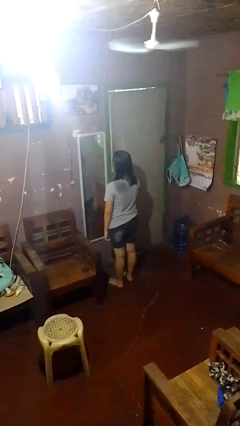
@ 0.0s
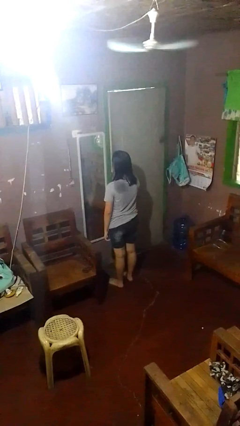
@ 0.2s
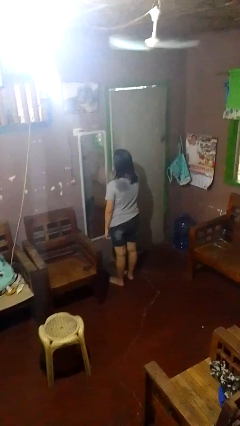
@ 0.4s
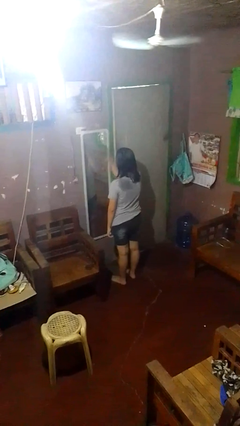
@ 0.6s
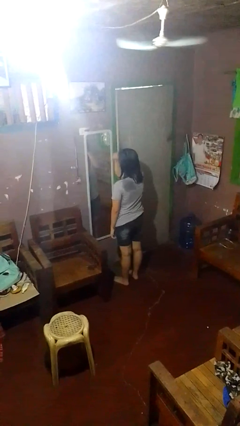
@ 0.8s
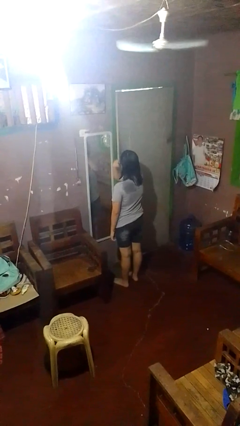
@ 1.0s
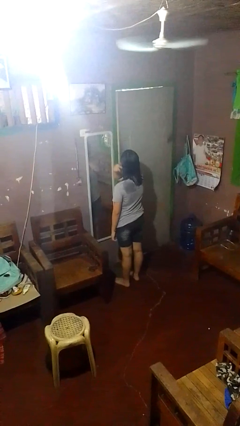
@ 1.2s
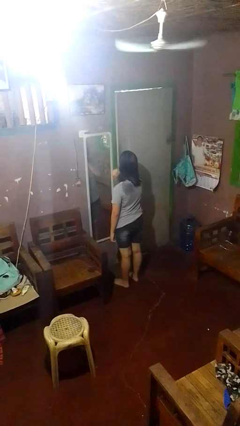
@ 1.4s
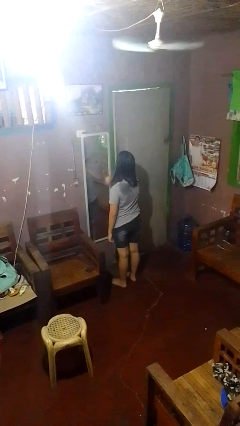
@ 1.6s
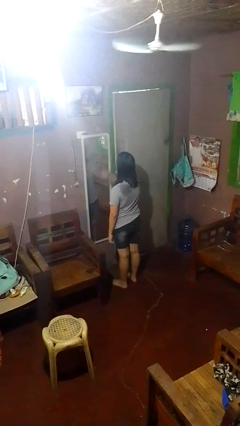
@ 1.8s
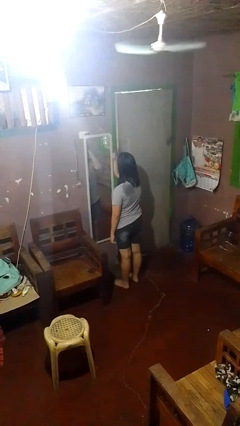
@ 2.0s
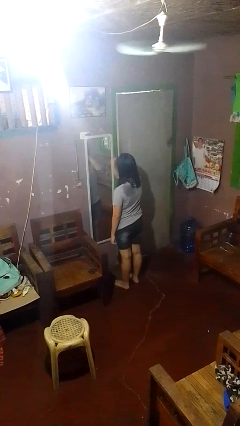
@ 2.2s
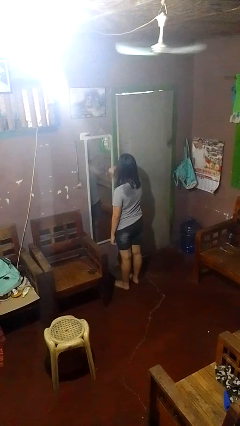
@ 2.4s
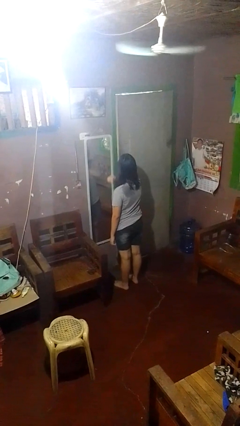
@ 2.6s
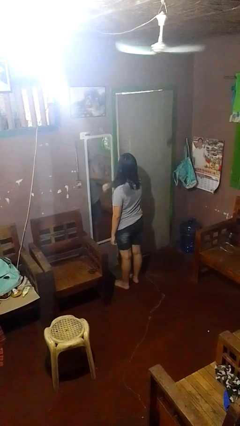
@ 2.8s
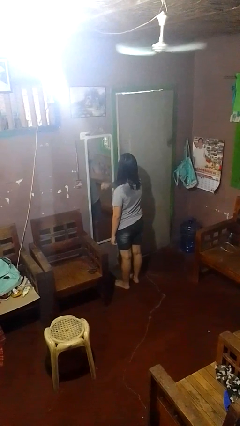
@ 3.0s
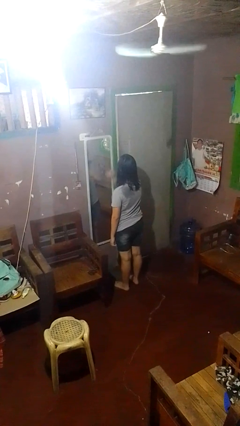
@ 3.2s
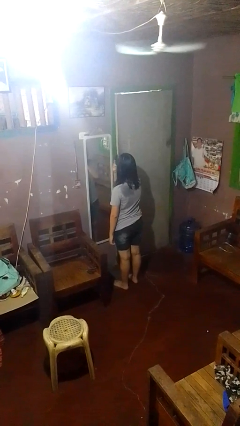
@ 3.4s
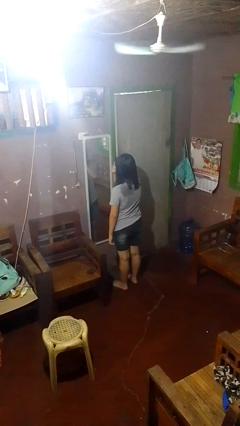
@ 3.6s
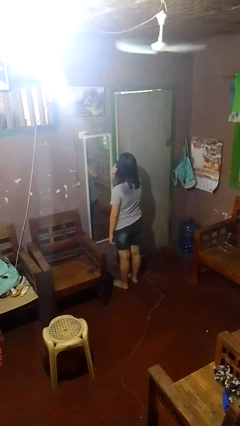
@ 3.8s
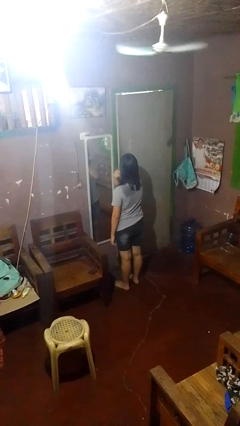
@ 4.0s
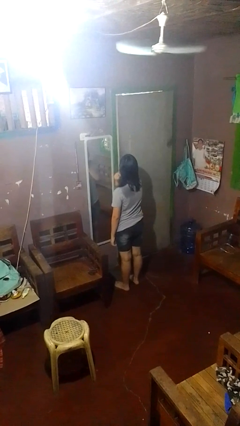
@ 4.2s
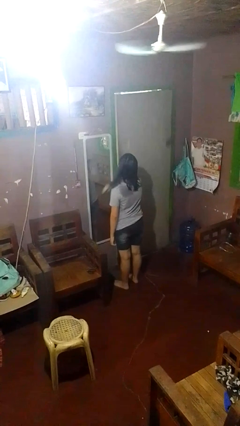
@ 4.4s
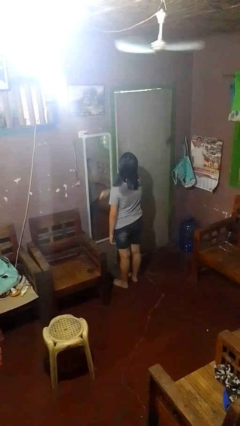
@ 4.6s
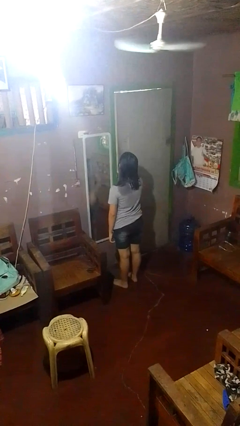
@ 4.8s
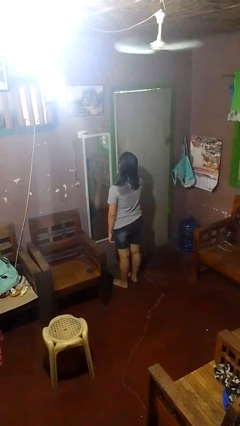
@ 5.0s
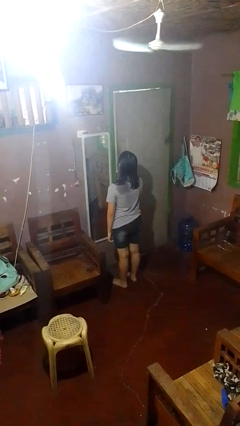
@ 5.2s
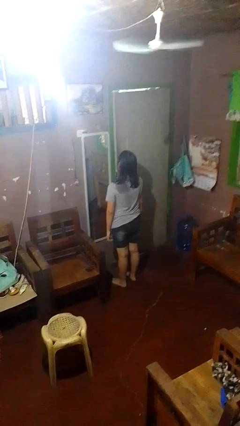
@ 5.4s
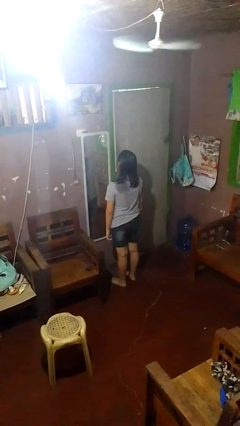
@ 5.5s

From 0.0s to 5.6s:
person brushes hair

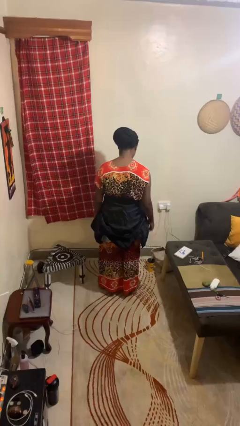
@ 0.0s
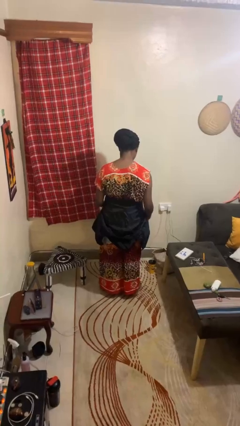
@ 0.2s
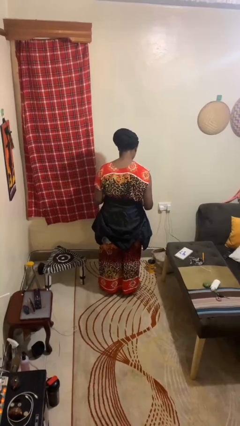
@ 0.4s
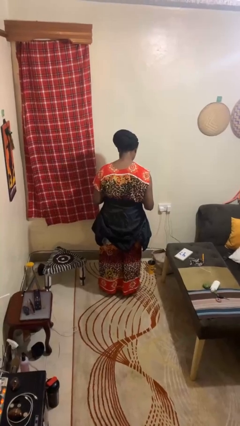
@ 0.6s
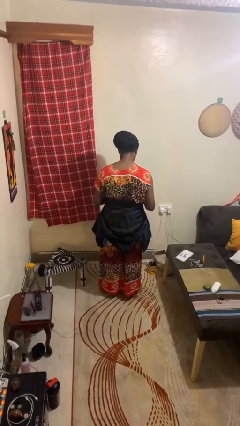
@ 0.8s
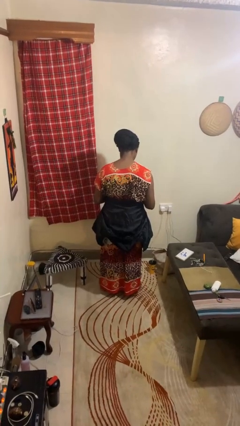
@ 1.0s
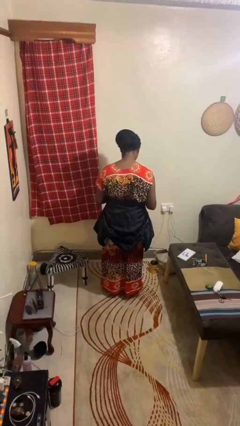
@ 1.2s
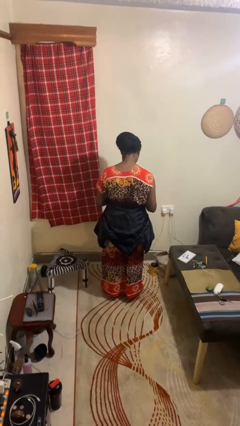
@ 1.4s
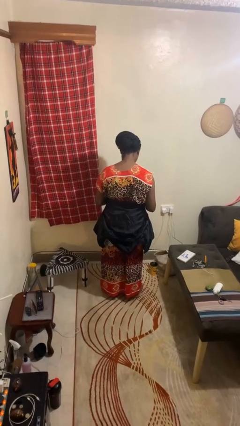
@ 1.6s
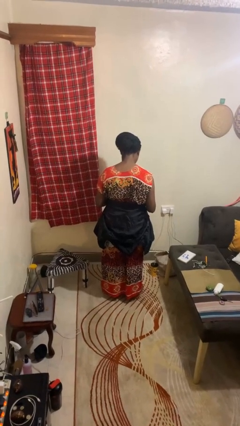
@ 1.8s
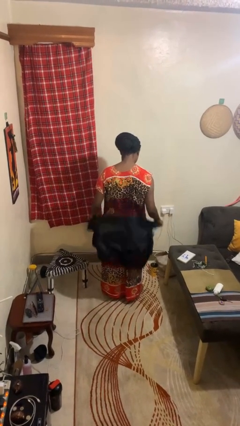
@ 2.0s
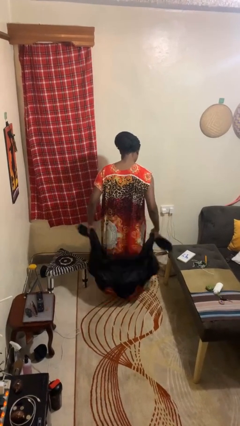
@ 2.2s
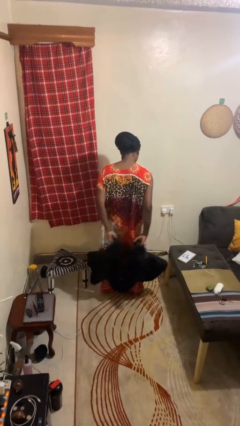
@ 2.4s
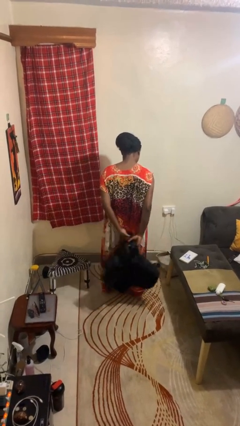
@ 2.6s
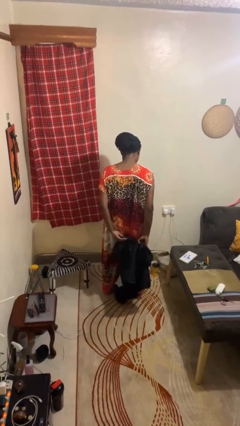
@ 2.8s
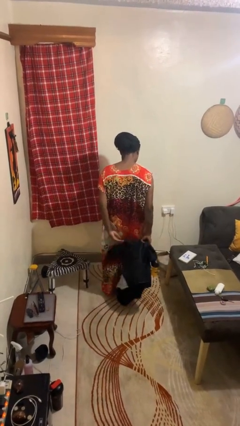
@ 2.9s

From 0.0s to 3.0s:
person unties jacket around waist

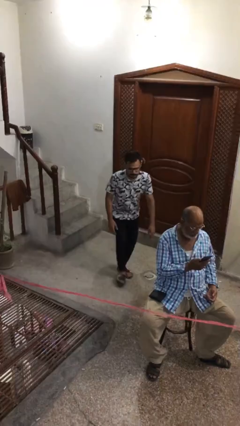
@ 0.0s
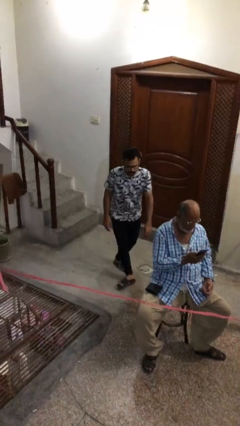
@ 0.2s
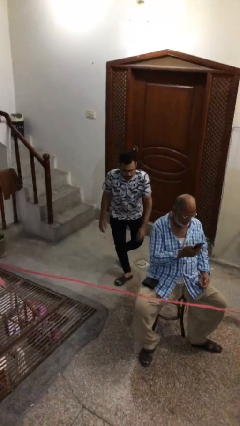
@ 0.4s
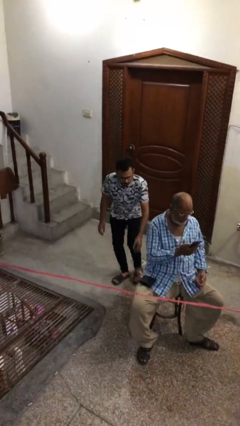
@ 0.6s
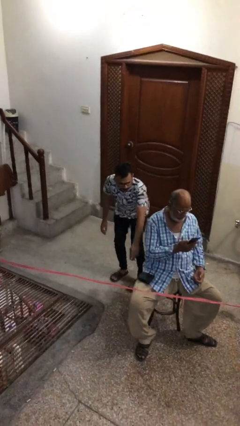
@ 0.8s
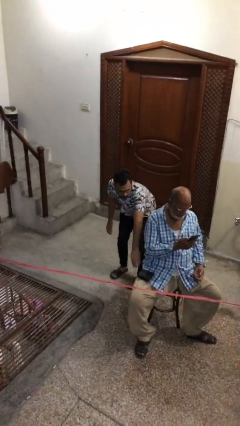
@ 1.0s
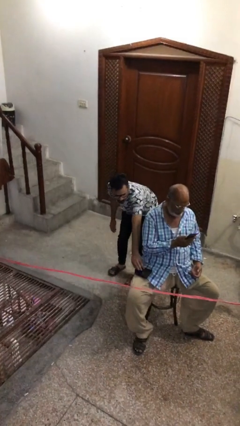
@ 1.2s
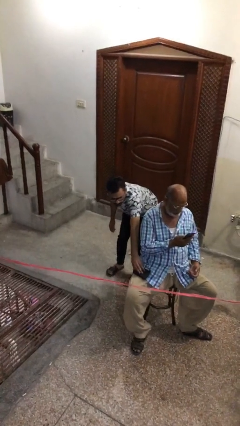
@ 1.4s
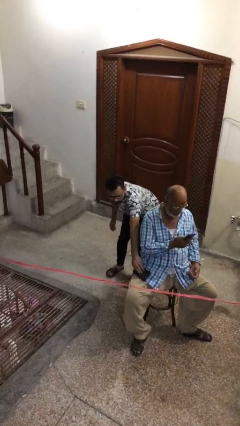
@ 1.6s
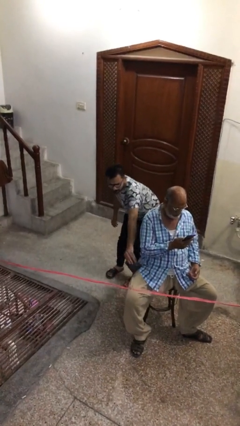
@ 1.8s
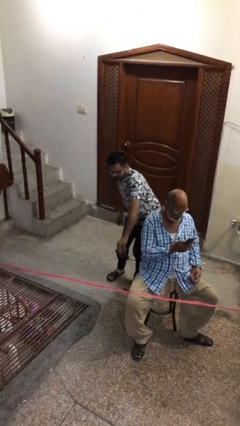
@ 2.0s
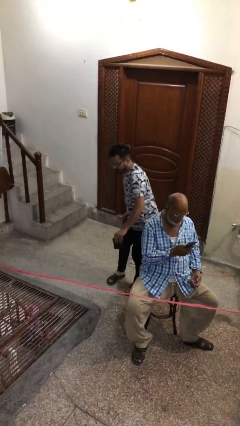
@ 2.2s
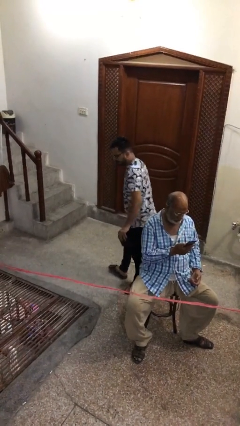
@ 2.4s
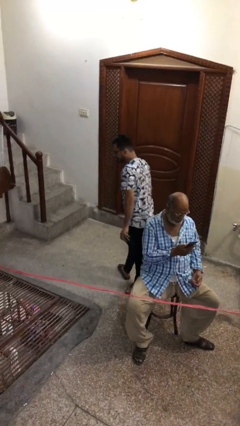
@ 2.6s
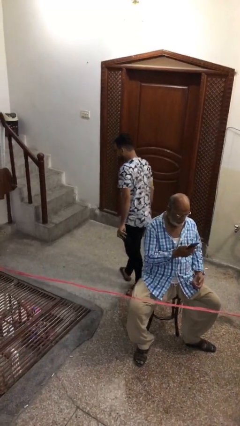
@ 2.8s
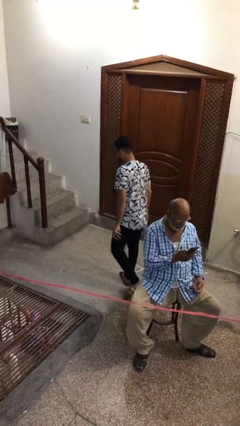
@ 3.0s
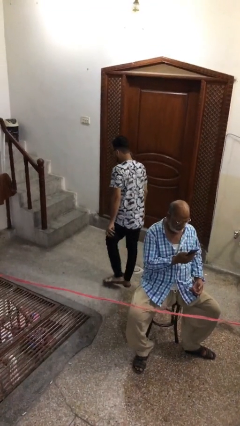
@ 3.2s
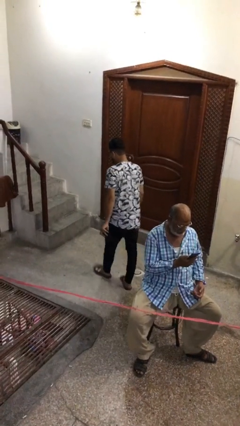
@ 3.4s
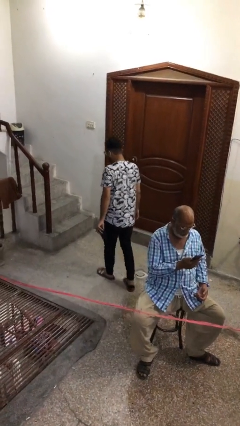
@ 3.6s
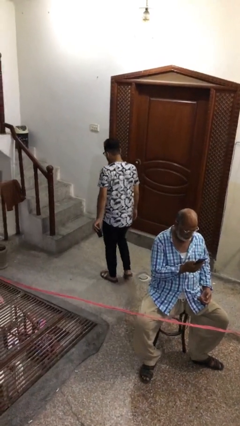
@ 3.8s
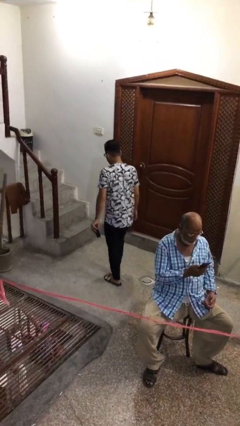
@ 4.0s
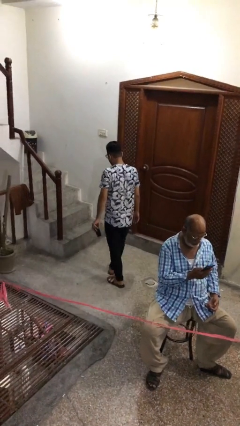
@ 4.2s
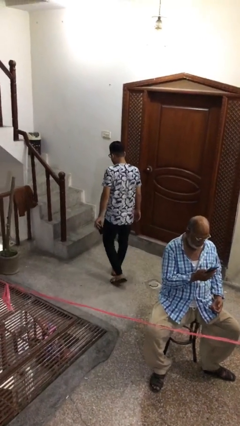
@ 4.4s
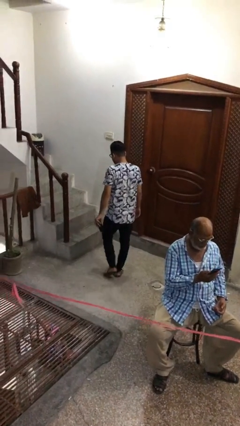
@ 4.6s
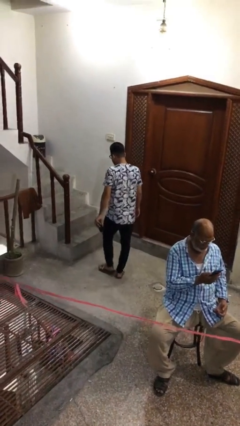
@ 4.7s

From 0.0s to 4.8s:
person steals object from person

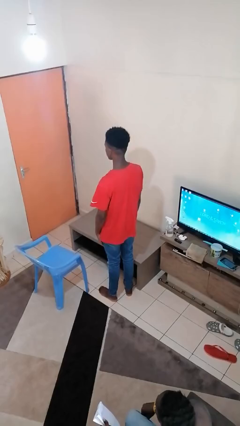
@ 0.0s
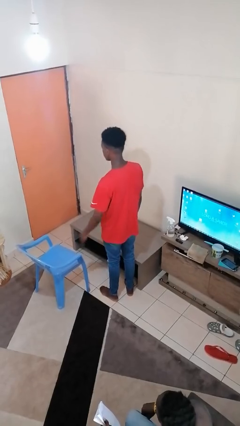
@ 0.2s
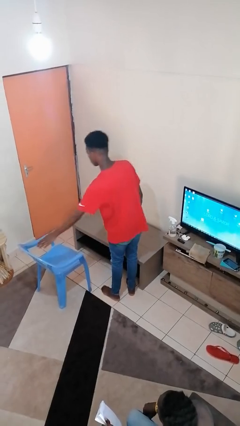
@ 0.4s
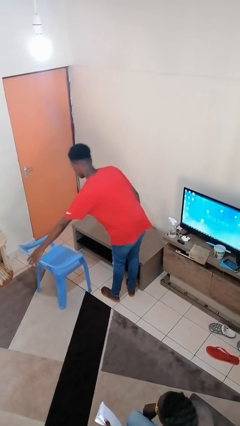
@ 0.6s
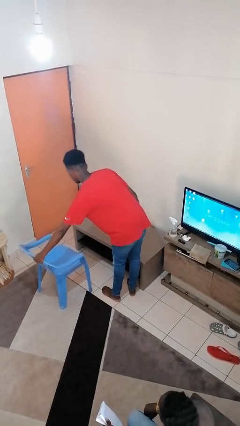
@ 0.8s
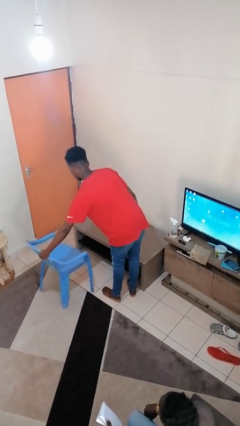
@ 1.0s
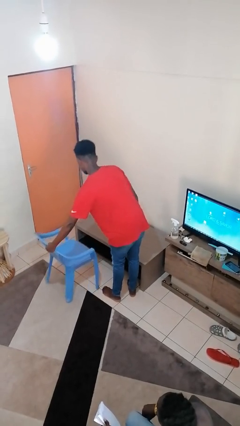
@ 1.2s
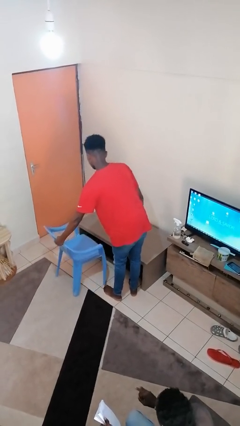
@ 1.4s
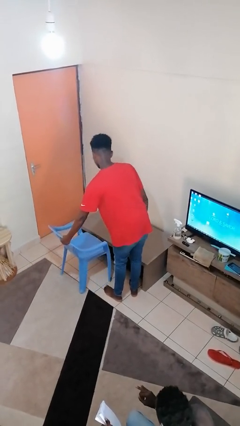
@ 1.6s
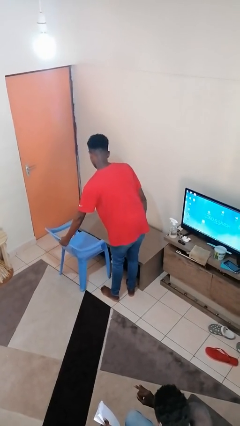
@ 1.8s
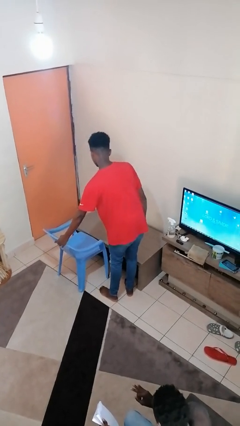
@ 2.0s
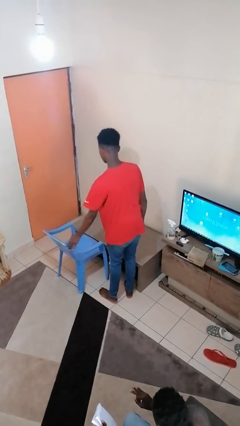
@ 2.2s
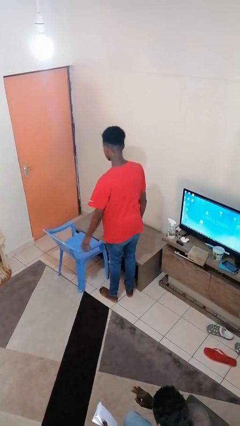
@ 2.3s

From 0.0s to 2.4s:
person pushes in chair

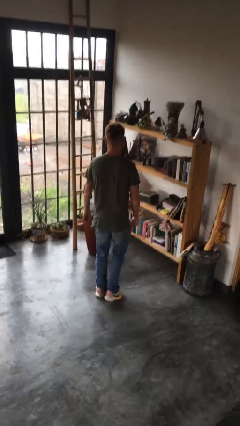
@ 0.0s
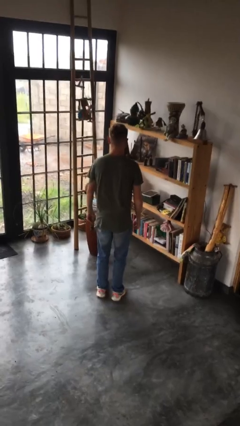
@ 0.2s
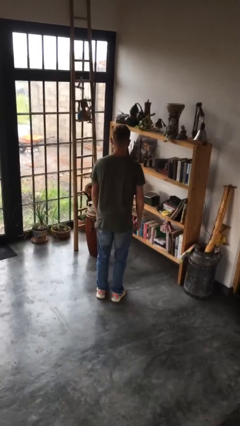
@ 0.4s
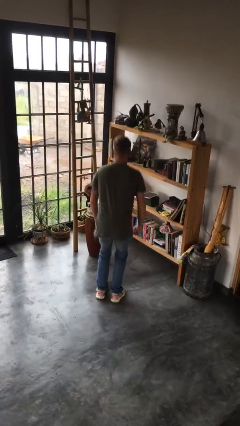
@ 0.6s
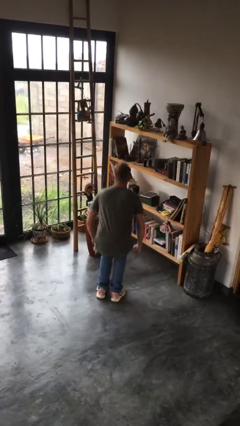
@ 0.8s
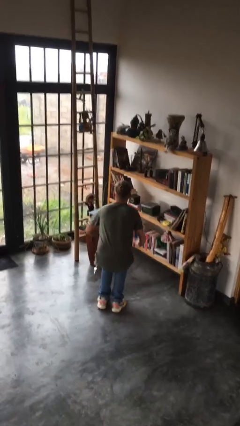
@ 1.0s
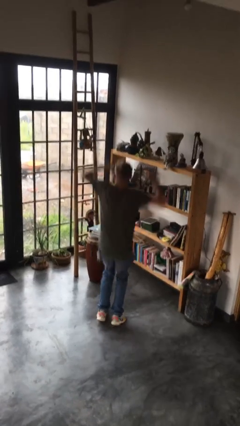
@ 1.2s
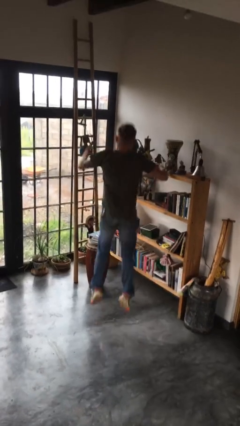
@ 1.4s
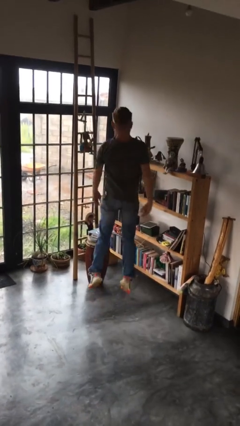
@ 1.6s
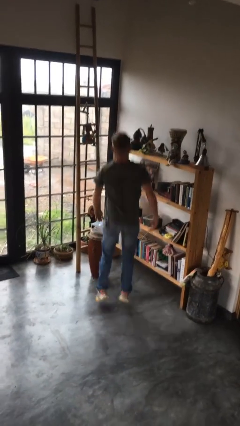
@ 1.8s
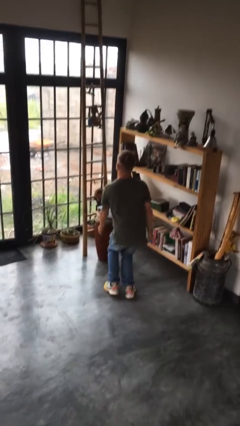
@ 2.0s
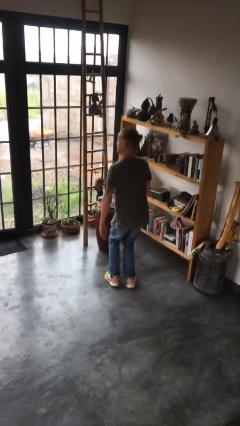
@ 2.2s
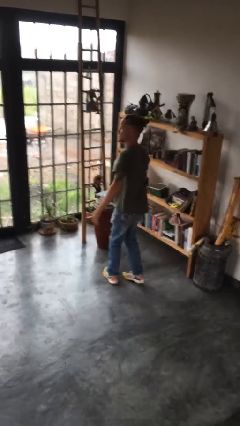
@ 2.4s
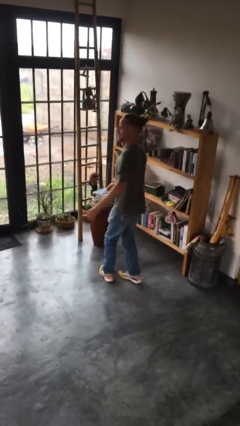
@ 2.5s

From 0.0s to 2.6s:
person jumps
